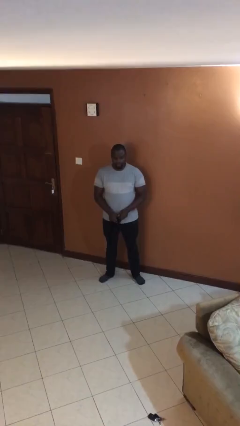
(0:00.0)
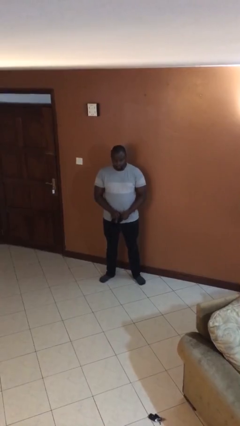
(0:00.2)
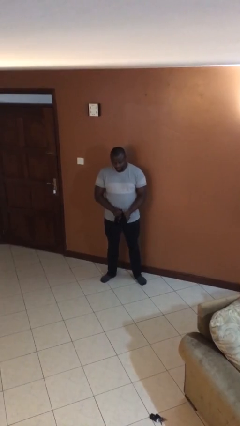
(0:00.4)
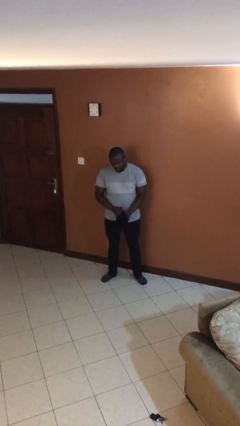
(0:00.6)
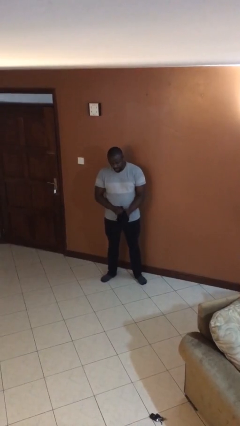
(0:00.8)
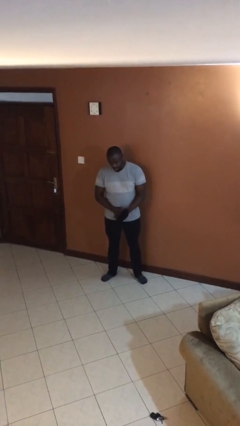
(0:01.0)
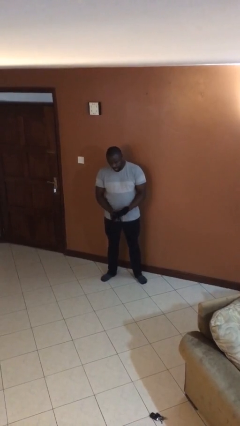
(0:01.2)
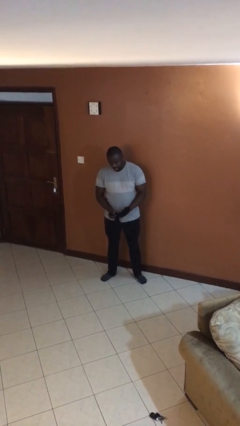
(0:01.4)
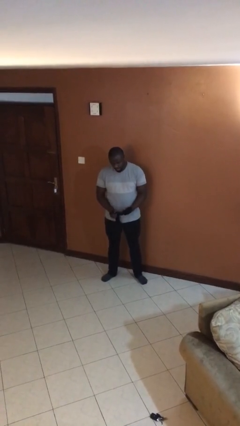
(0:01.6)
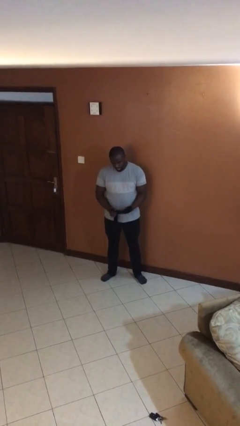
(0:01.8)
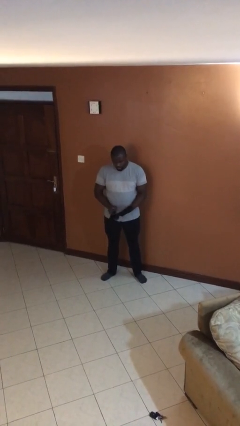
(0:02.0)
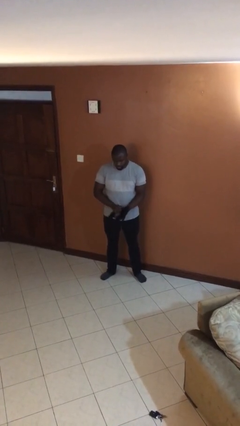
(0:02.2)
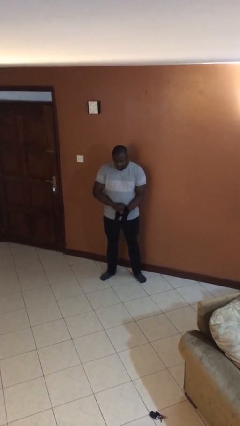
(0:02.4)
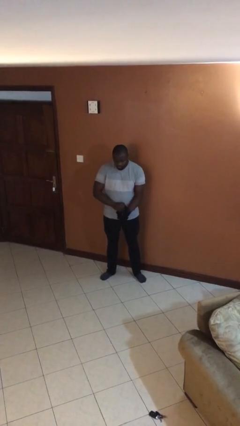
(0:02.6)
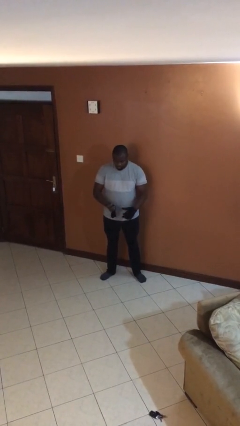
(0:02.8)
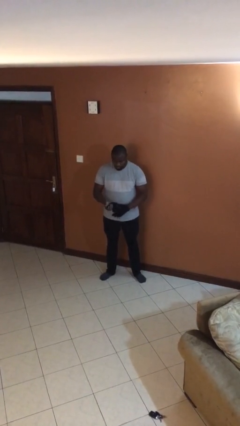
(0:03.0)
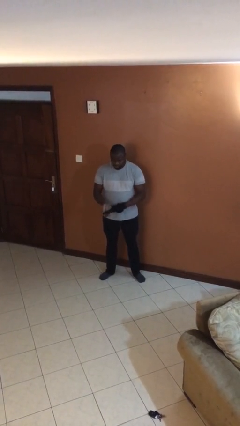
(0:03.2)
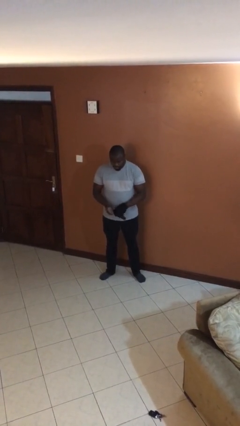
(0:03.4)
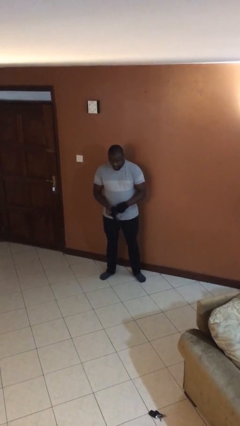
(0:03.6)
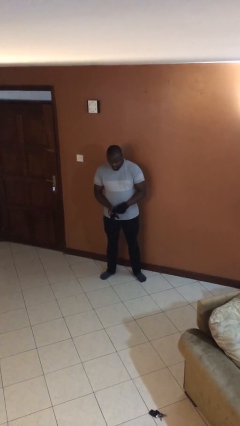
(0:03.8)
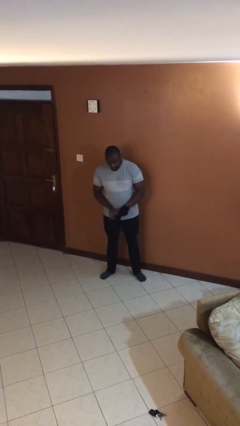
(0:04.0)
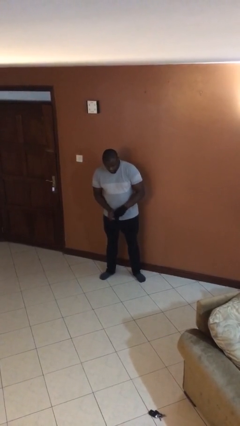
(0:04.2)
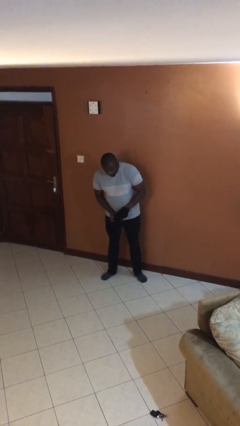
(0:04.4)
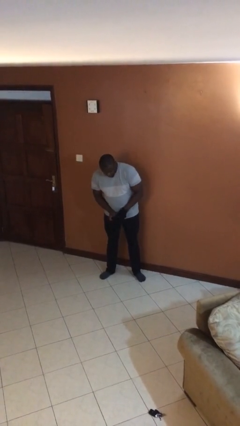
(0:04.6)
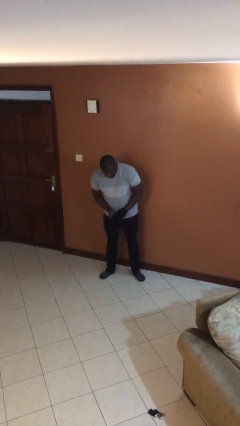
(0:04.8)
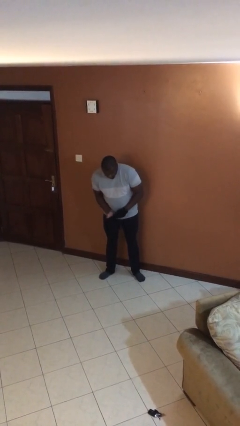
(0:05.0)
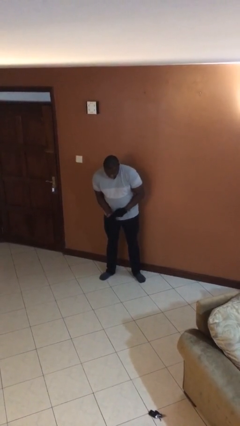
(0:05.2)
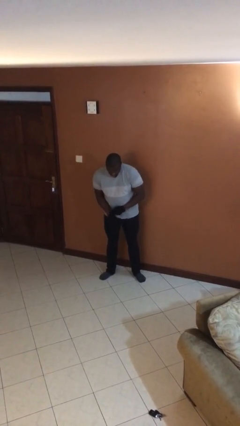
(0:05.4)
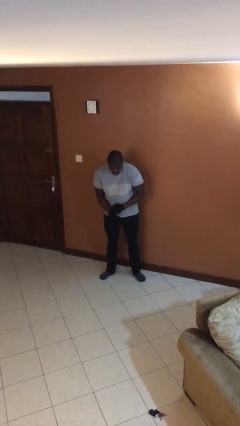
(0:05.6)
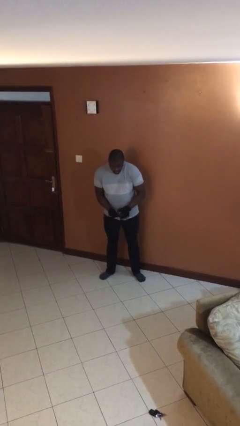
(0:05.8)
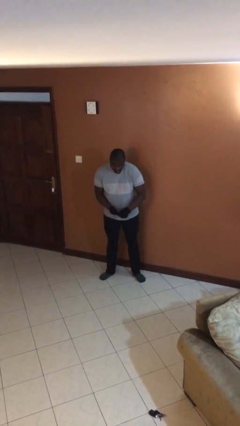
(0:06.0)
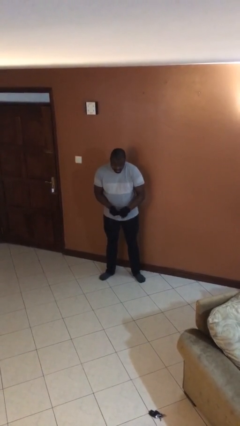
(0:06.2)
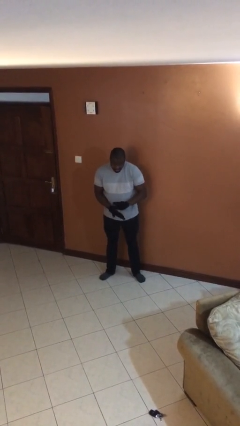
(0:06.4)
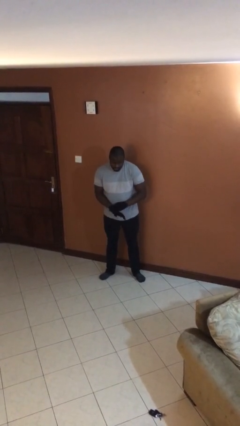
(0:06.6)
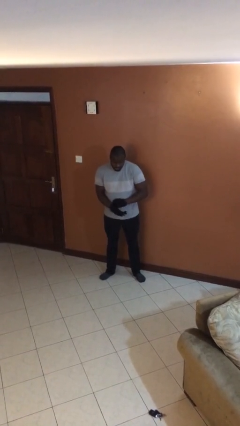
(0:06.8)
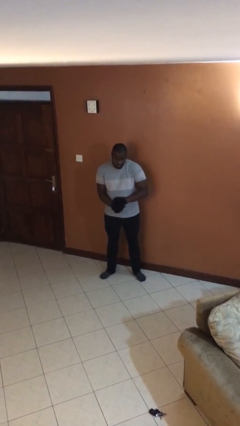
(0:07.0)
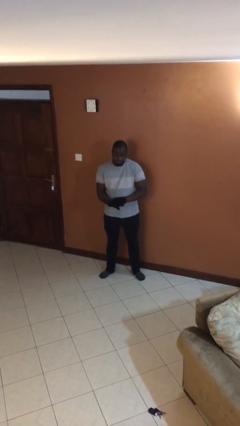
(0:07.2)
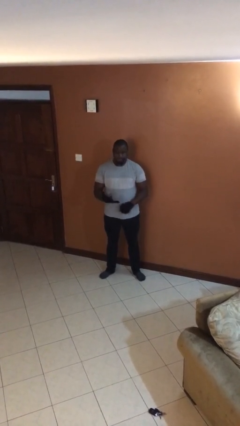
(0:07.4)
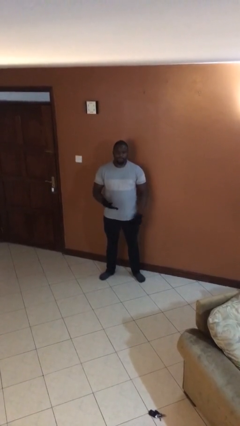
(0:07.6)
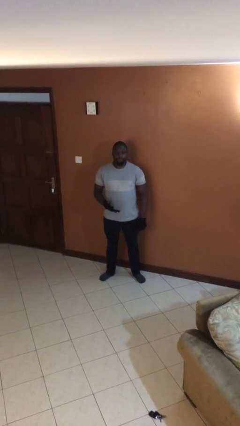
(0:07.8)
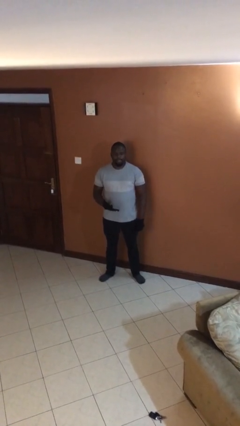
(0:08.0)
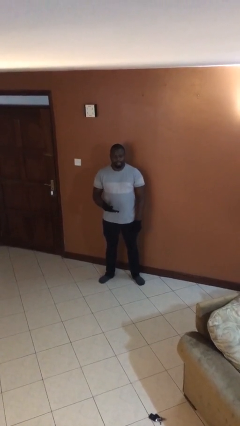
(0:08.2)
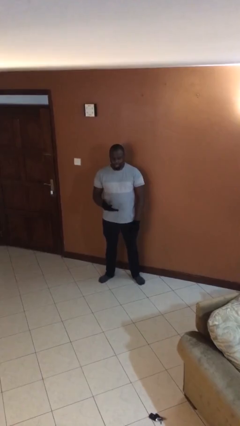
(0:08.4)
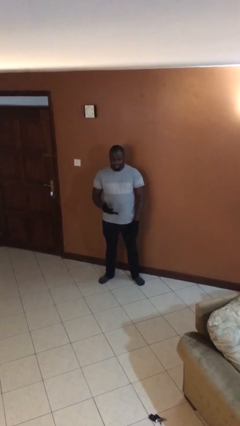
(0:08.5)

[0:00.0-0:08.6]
person puts on gloves

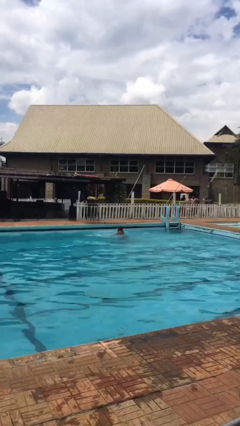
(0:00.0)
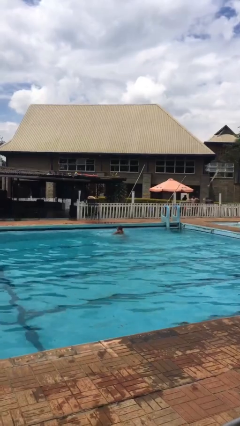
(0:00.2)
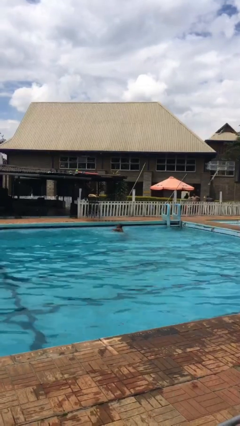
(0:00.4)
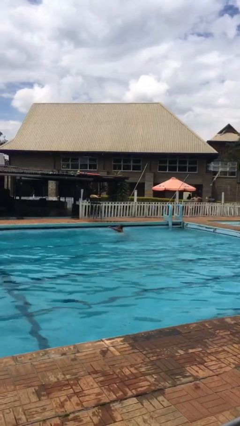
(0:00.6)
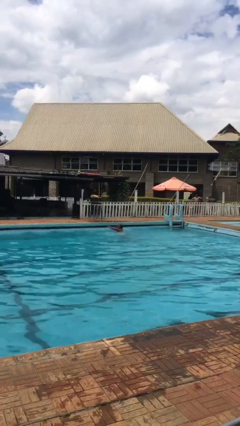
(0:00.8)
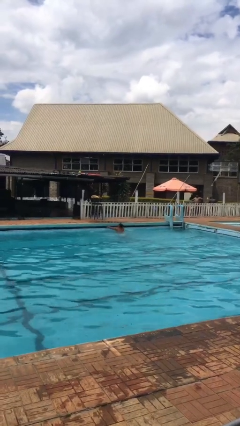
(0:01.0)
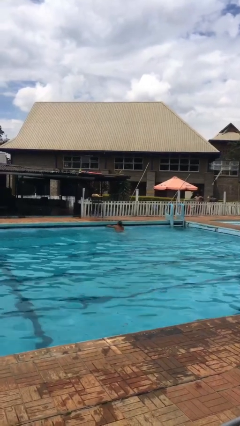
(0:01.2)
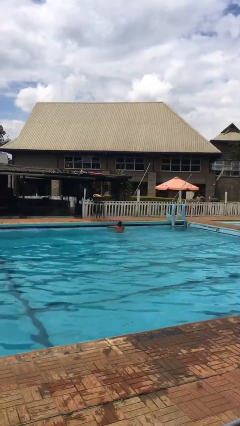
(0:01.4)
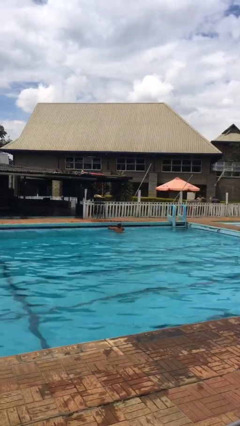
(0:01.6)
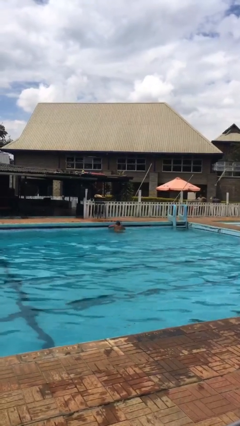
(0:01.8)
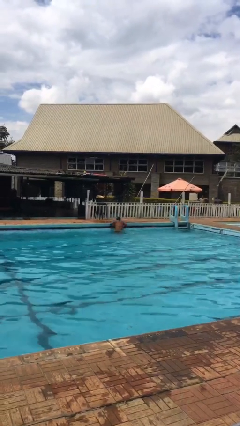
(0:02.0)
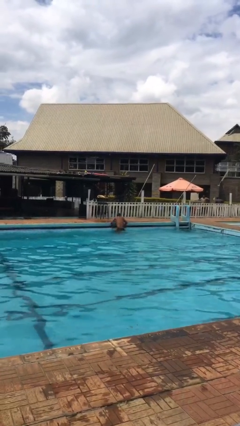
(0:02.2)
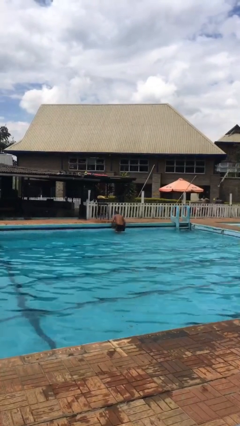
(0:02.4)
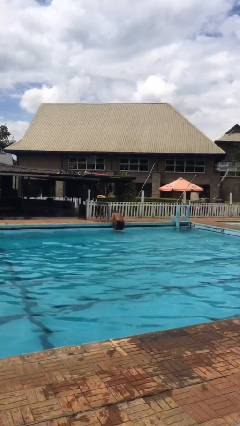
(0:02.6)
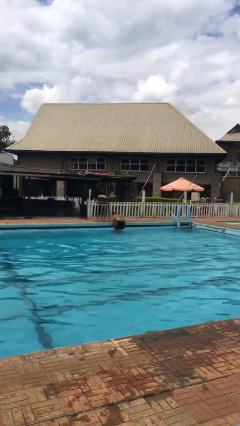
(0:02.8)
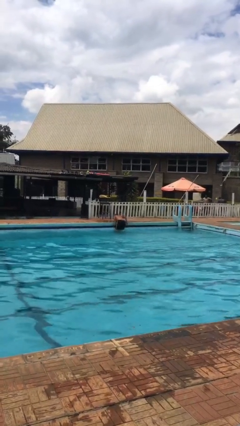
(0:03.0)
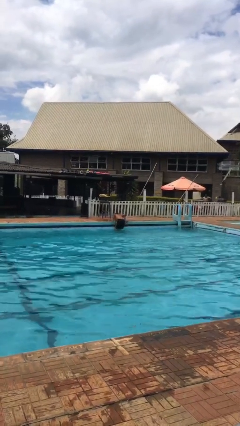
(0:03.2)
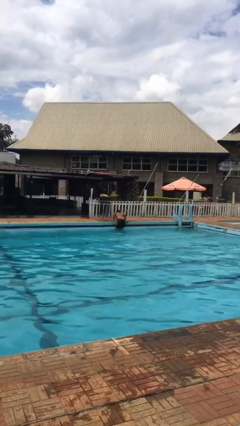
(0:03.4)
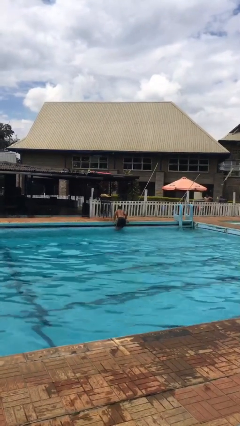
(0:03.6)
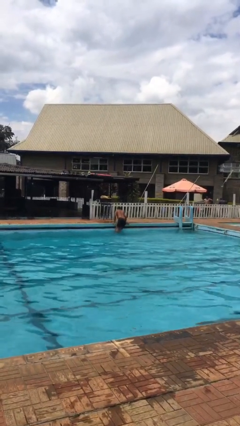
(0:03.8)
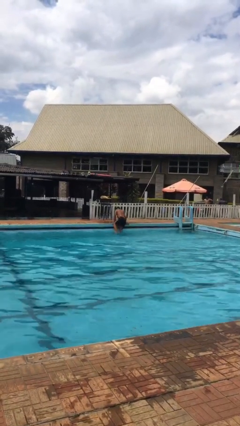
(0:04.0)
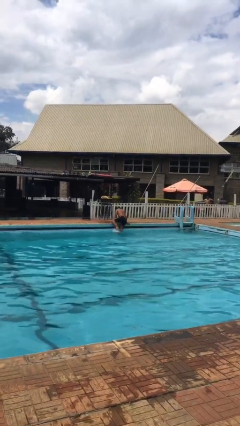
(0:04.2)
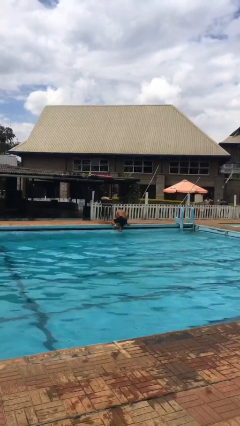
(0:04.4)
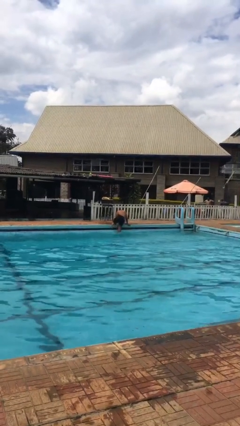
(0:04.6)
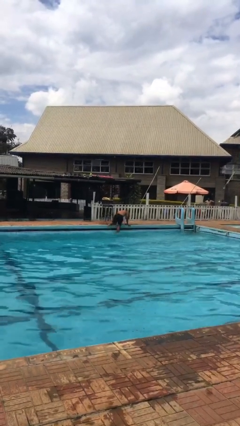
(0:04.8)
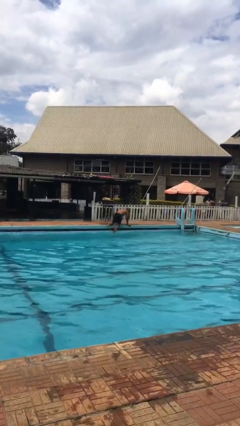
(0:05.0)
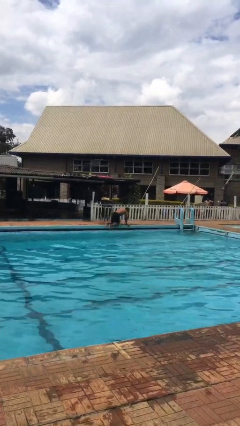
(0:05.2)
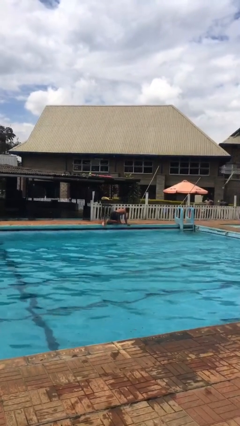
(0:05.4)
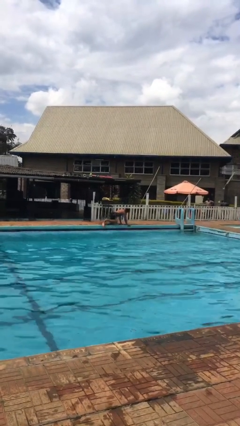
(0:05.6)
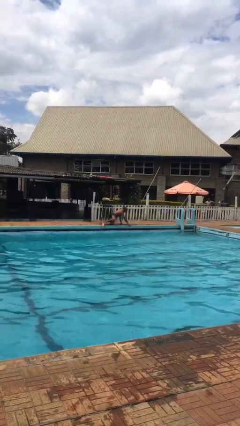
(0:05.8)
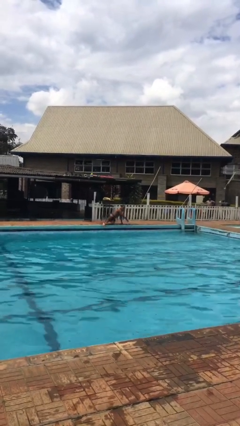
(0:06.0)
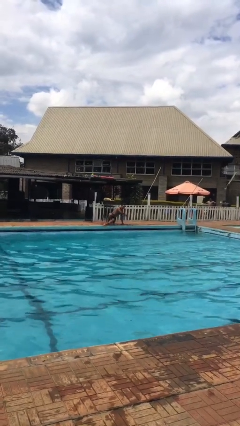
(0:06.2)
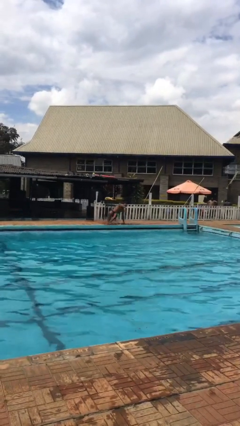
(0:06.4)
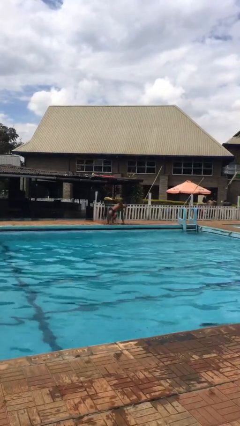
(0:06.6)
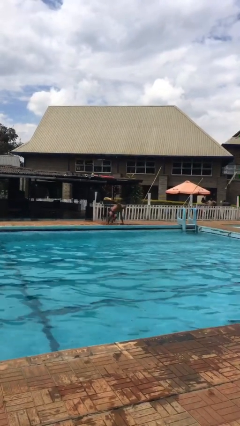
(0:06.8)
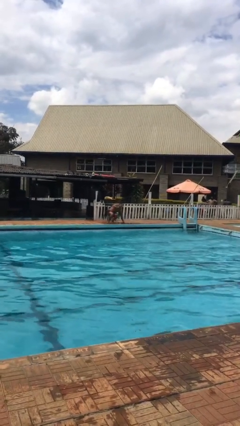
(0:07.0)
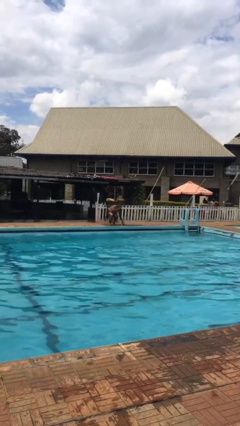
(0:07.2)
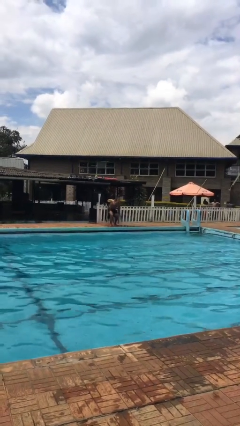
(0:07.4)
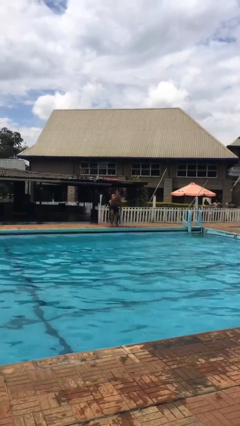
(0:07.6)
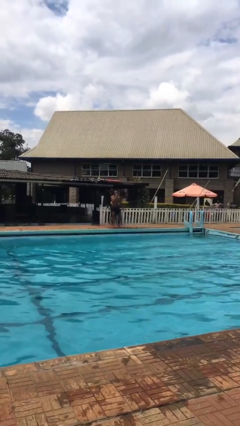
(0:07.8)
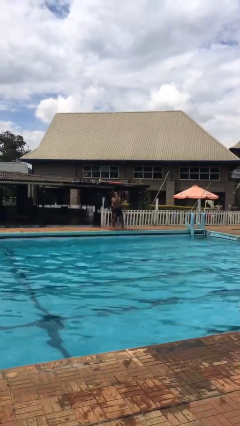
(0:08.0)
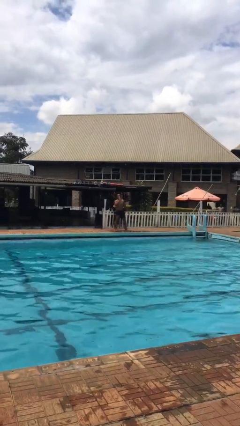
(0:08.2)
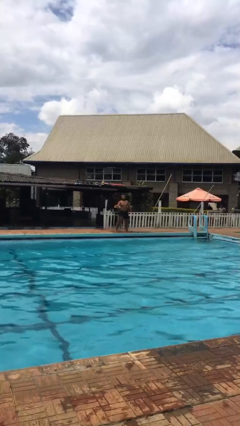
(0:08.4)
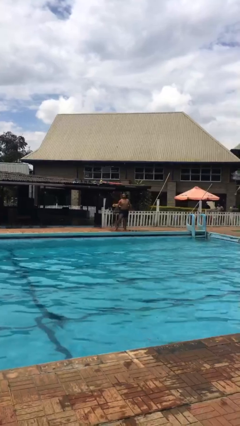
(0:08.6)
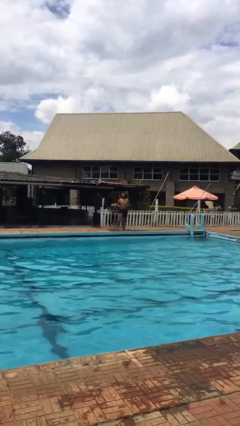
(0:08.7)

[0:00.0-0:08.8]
person exits pool

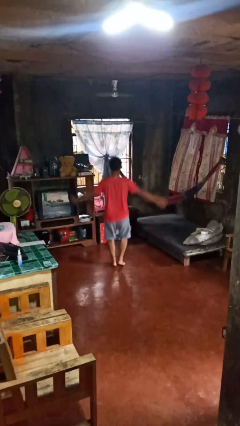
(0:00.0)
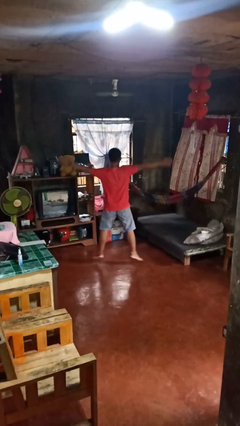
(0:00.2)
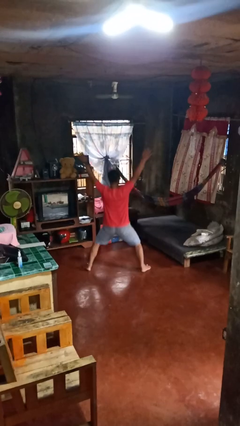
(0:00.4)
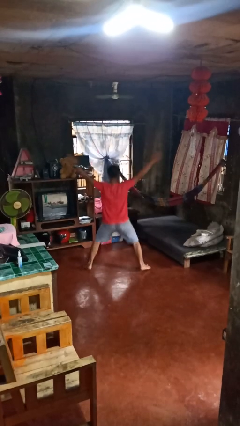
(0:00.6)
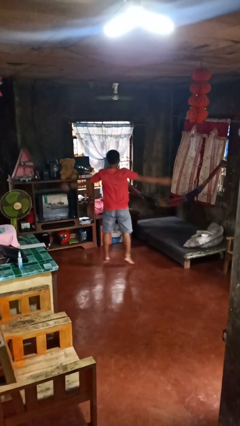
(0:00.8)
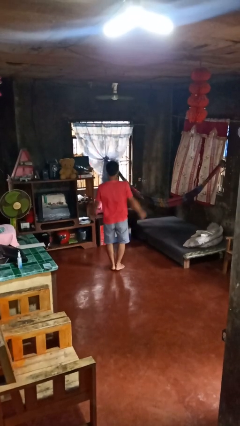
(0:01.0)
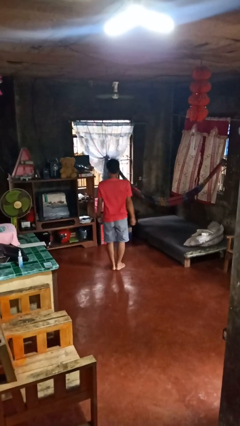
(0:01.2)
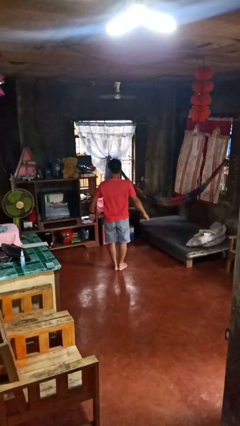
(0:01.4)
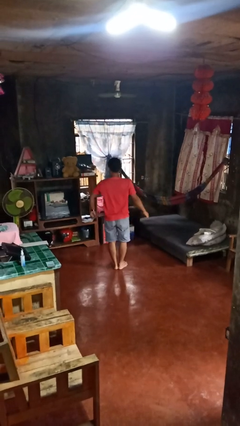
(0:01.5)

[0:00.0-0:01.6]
person exercises with jumping jacks
